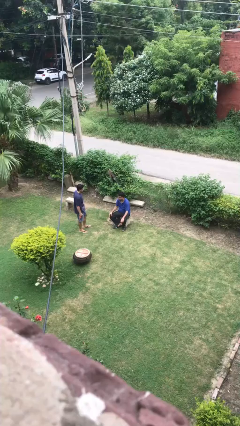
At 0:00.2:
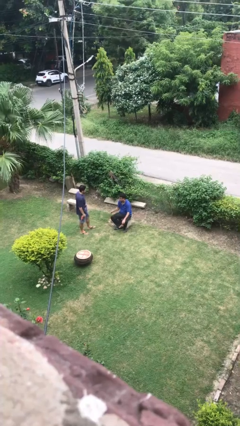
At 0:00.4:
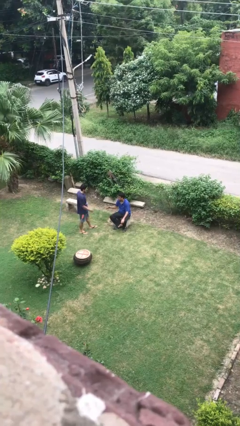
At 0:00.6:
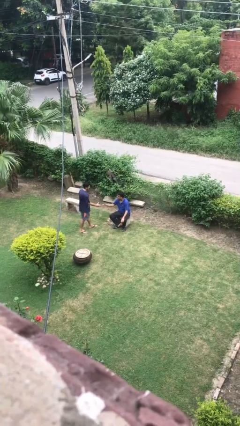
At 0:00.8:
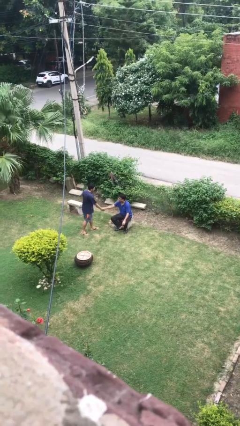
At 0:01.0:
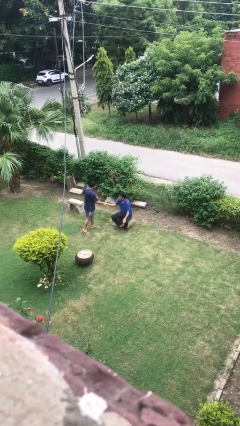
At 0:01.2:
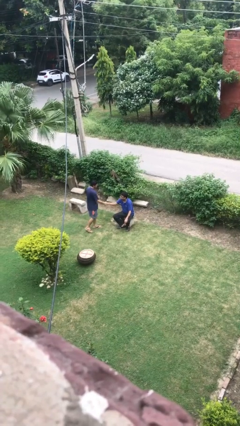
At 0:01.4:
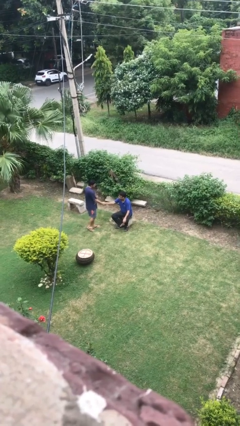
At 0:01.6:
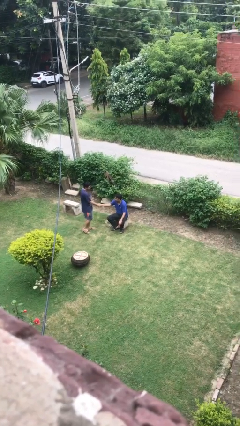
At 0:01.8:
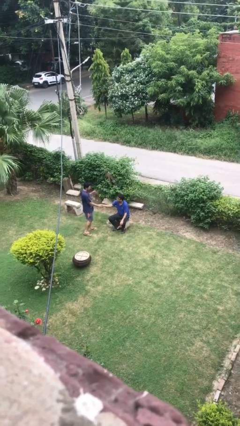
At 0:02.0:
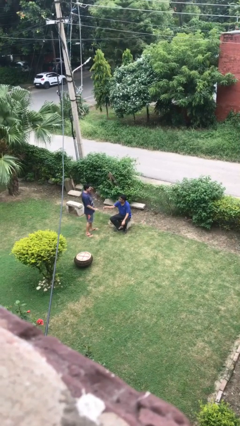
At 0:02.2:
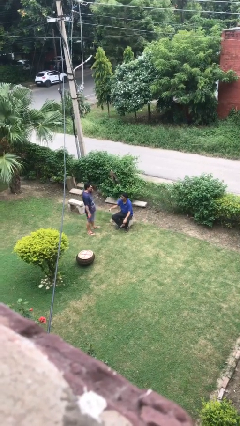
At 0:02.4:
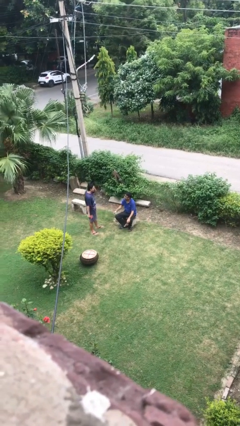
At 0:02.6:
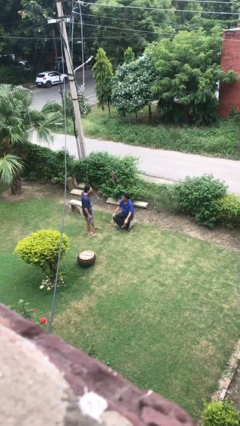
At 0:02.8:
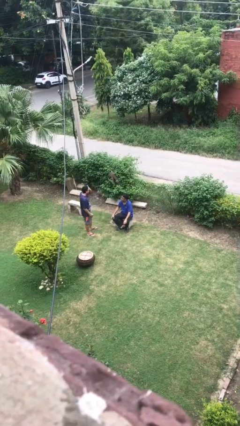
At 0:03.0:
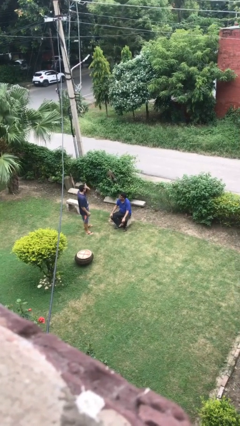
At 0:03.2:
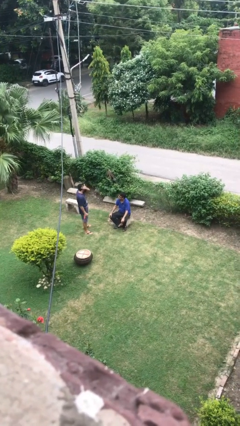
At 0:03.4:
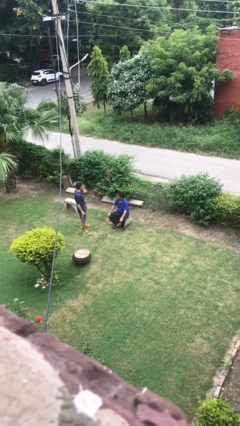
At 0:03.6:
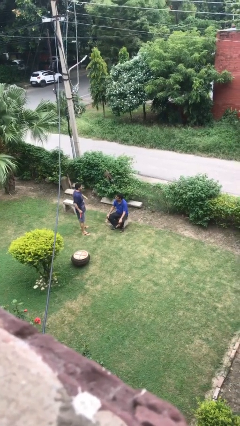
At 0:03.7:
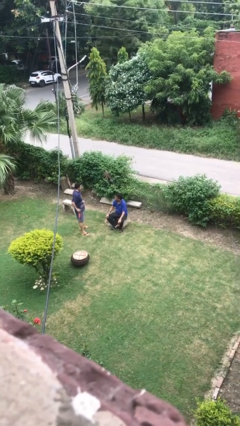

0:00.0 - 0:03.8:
person shakes hand

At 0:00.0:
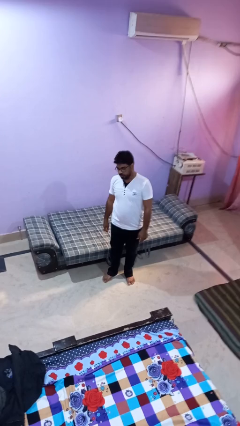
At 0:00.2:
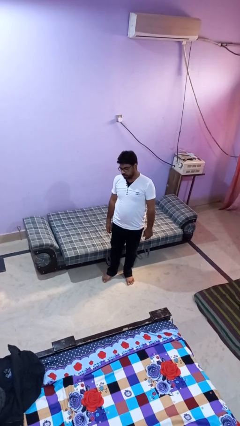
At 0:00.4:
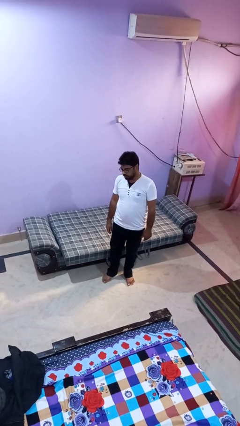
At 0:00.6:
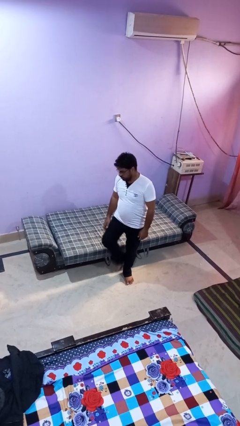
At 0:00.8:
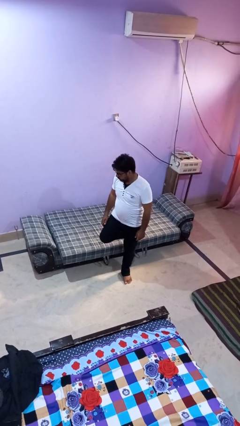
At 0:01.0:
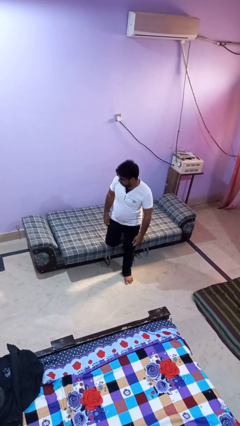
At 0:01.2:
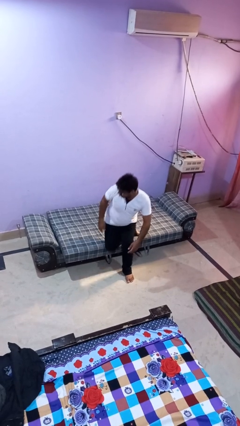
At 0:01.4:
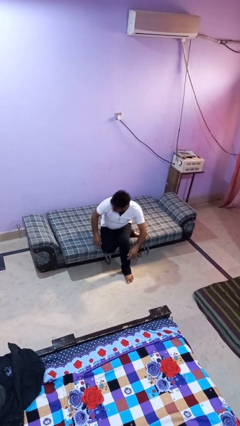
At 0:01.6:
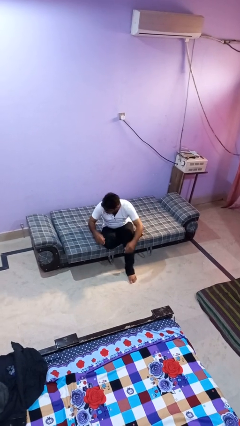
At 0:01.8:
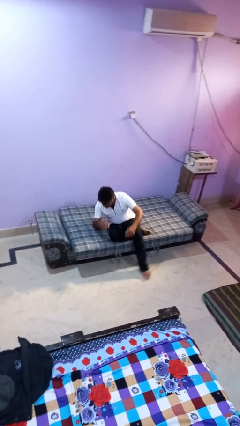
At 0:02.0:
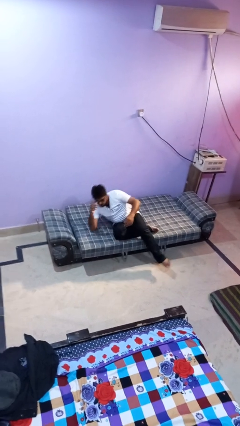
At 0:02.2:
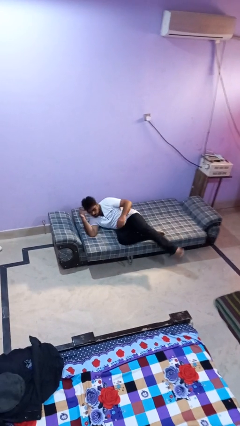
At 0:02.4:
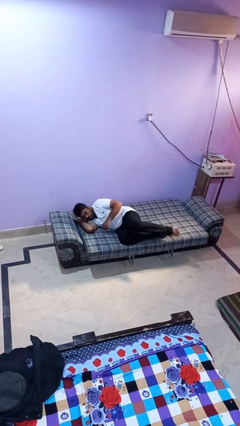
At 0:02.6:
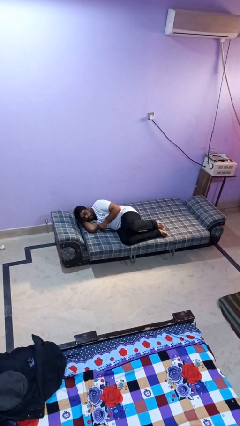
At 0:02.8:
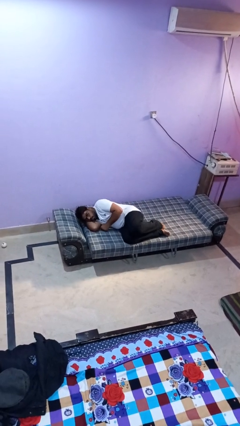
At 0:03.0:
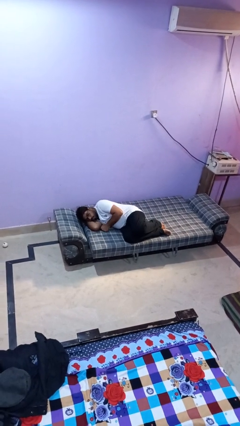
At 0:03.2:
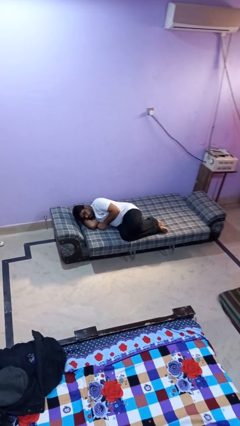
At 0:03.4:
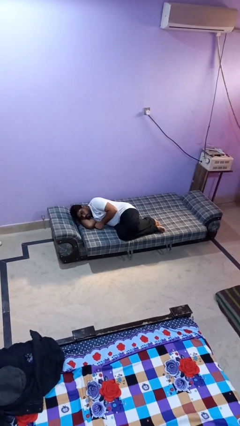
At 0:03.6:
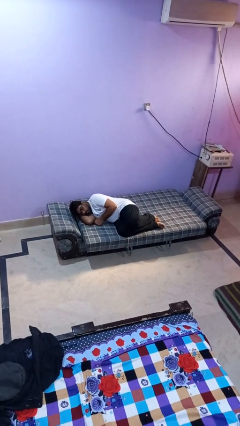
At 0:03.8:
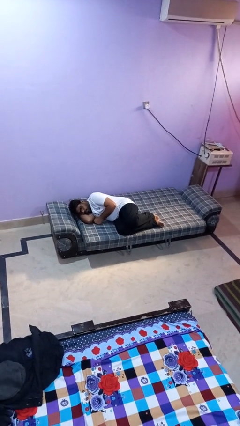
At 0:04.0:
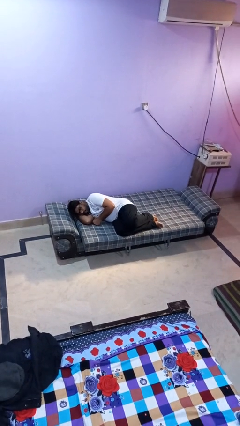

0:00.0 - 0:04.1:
person lies down on bed

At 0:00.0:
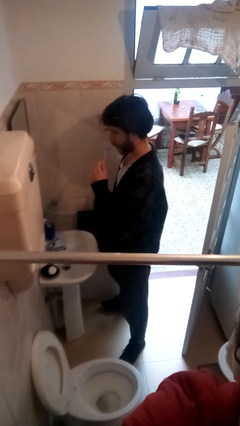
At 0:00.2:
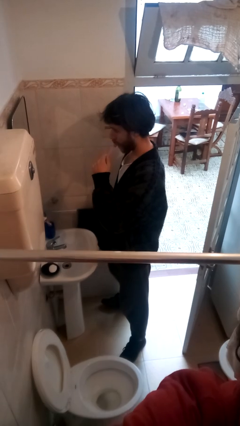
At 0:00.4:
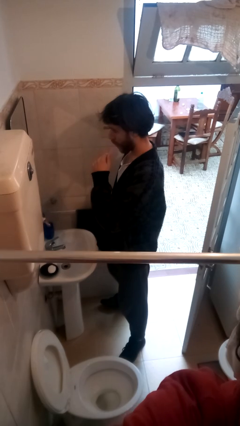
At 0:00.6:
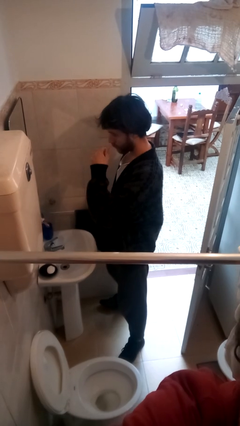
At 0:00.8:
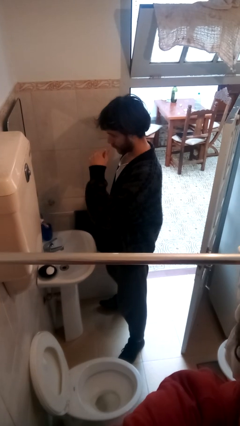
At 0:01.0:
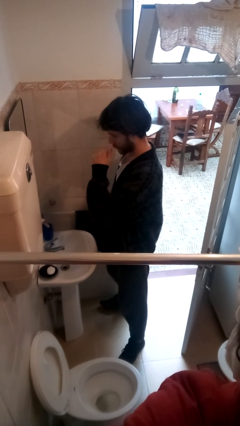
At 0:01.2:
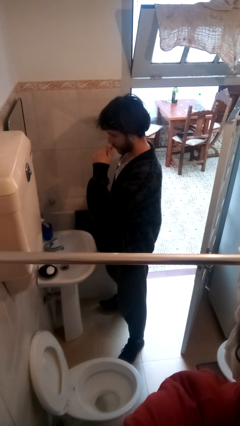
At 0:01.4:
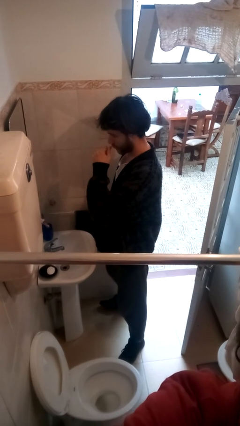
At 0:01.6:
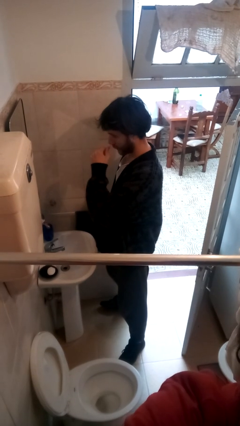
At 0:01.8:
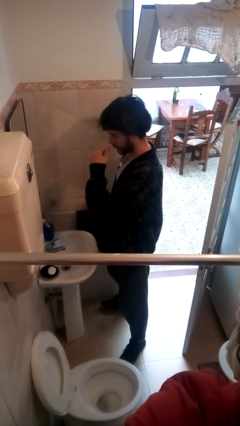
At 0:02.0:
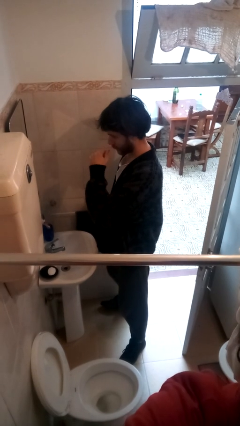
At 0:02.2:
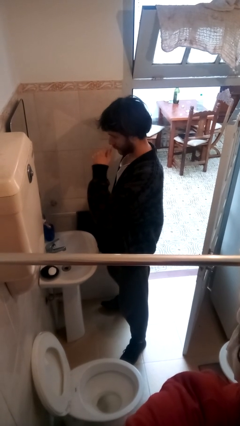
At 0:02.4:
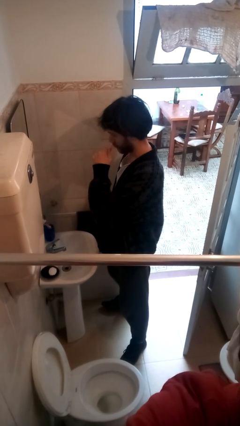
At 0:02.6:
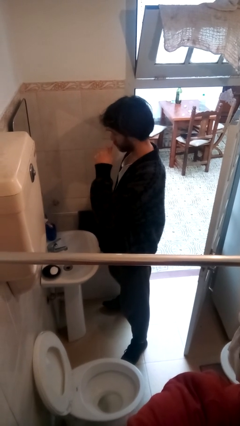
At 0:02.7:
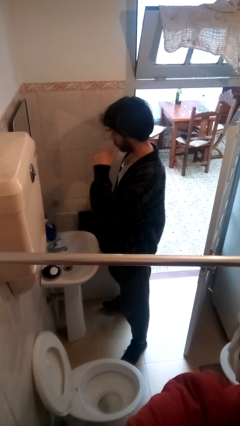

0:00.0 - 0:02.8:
person brushes teeth

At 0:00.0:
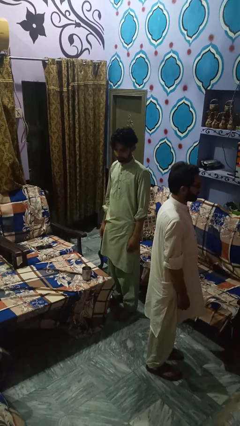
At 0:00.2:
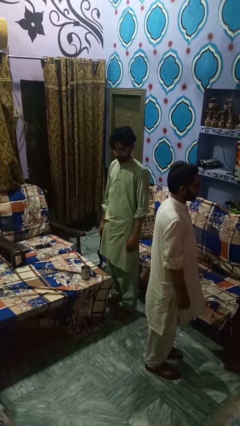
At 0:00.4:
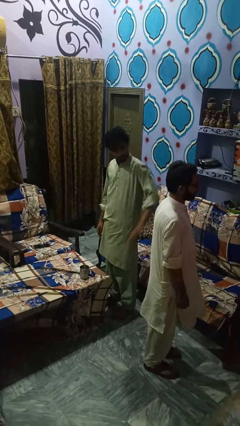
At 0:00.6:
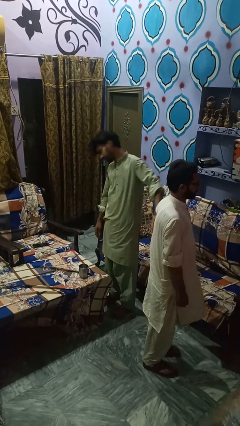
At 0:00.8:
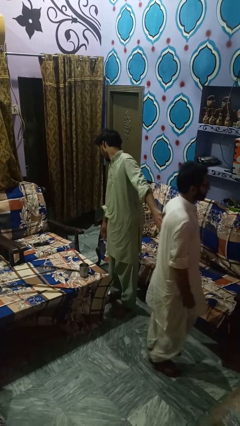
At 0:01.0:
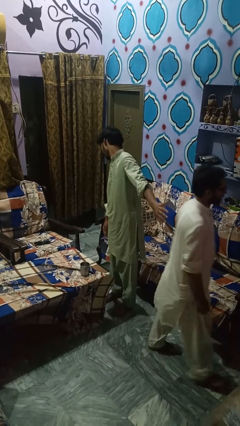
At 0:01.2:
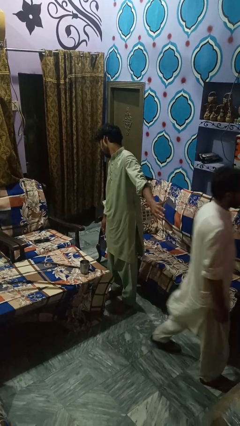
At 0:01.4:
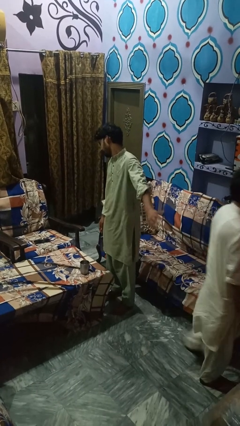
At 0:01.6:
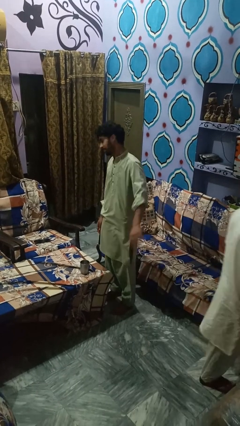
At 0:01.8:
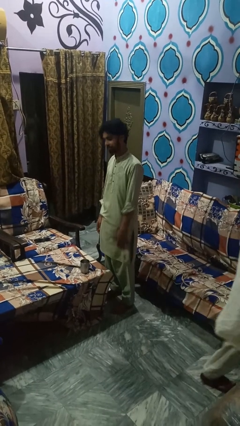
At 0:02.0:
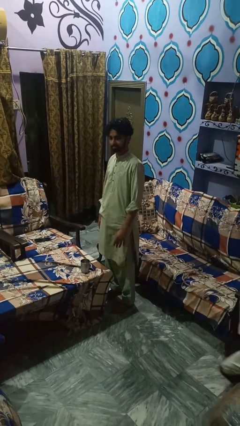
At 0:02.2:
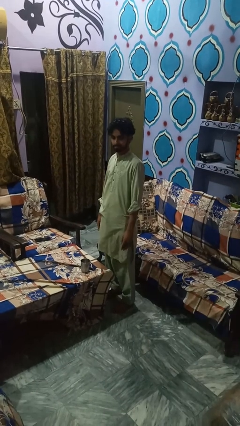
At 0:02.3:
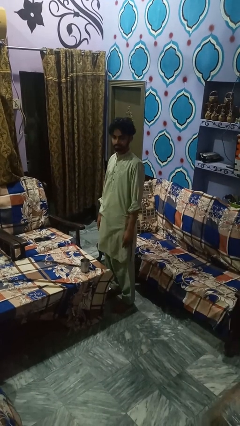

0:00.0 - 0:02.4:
person shoves person

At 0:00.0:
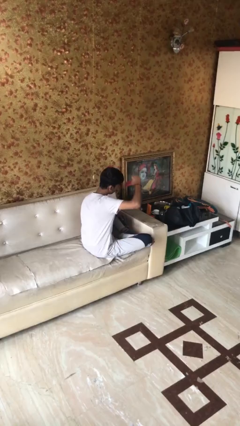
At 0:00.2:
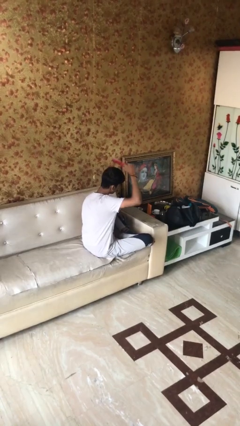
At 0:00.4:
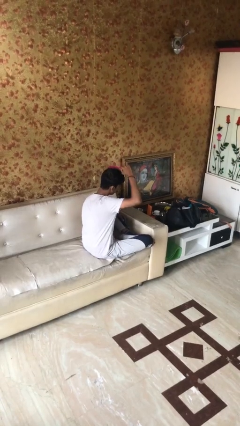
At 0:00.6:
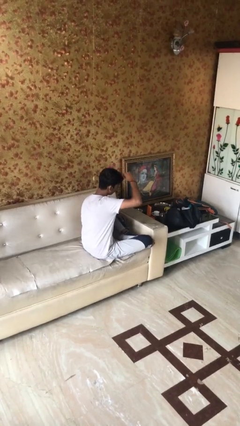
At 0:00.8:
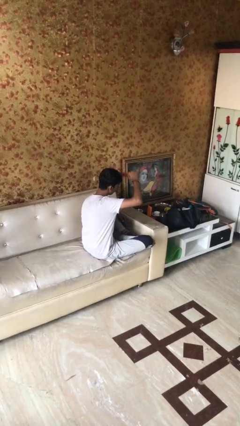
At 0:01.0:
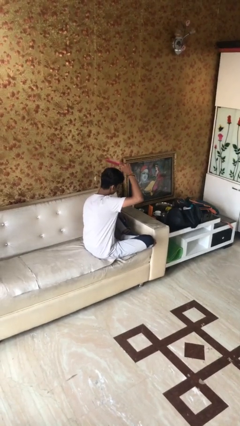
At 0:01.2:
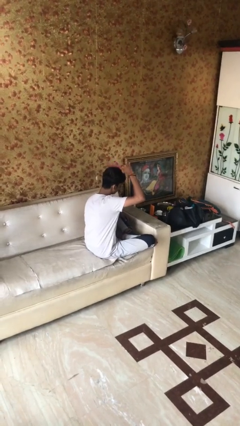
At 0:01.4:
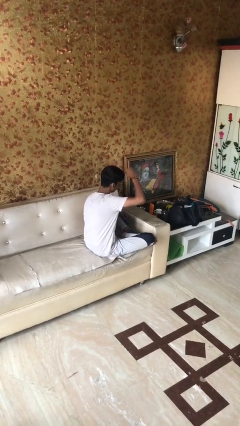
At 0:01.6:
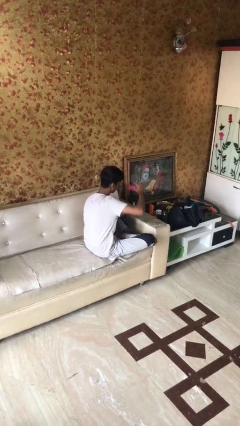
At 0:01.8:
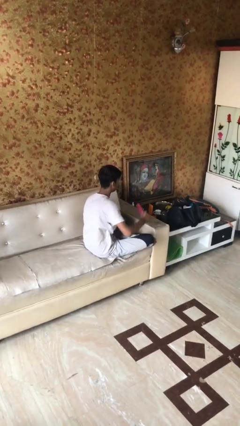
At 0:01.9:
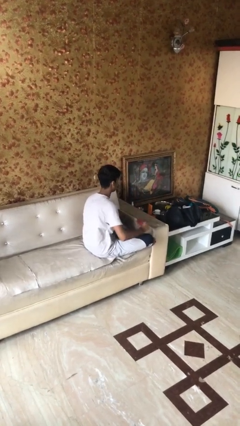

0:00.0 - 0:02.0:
person brushes hair

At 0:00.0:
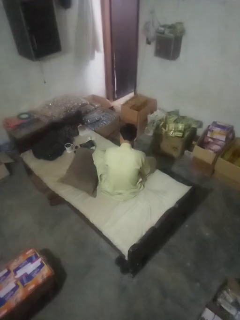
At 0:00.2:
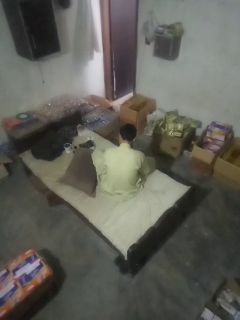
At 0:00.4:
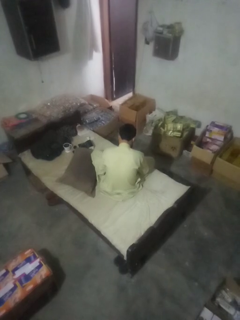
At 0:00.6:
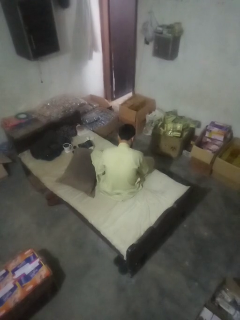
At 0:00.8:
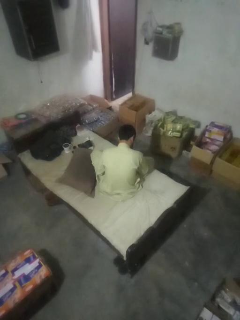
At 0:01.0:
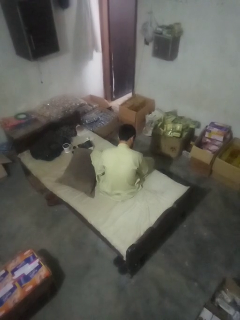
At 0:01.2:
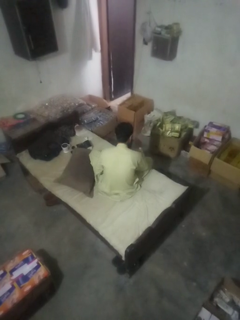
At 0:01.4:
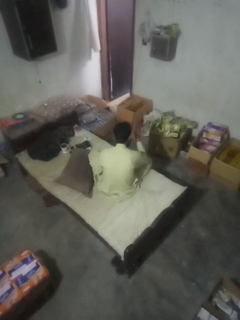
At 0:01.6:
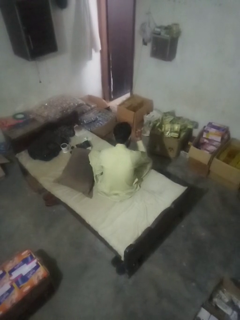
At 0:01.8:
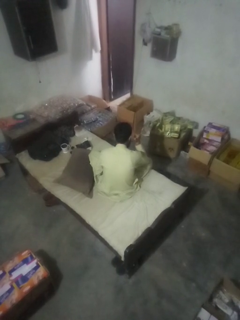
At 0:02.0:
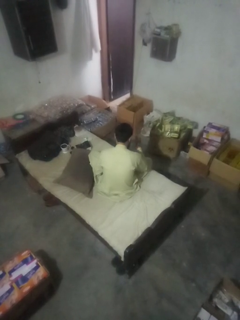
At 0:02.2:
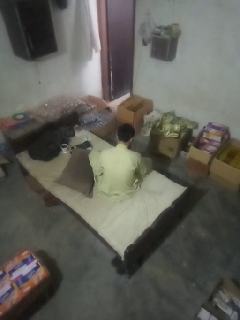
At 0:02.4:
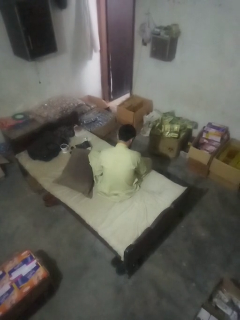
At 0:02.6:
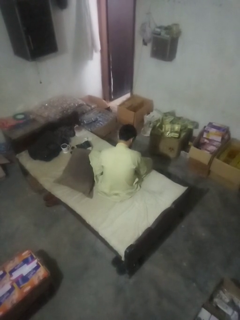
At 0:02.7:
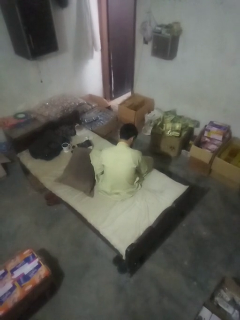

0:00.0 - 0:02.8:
person gestures behind me

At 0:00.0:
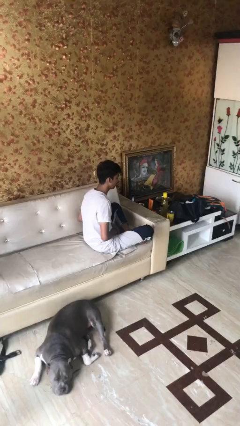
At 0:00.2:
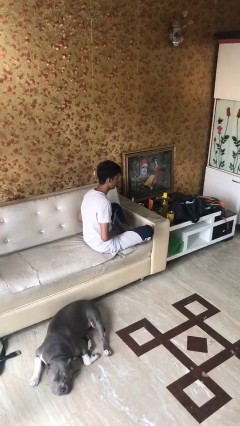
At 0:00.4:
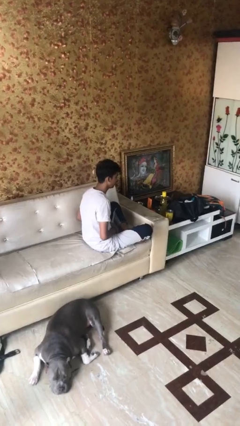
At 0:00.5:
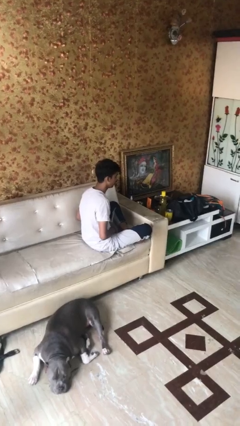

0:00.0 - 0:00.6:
person slaps hands on thighs
